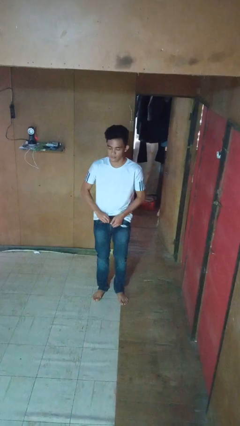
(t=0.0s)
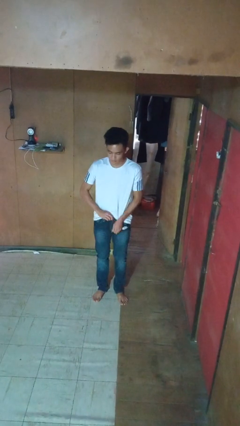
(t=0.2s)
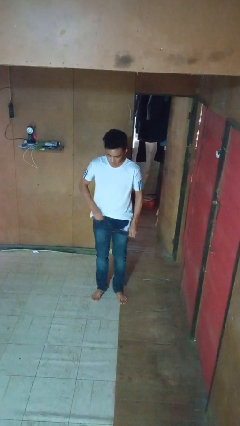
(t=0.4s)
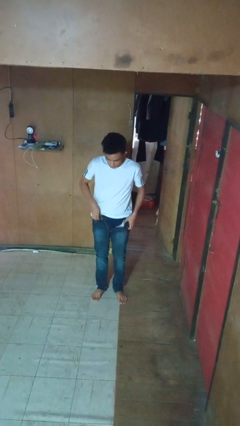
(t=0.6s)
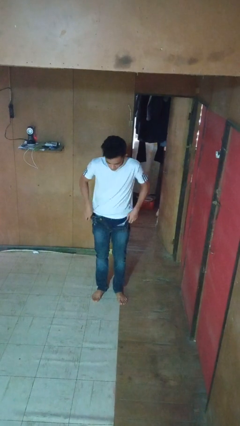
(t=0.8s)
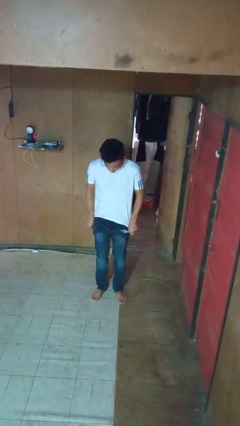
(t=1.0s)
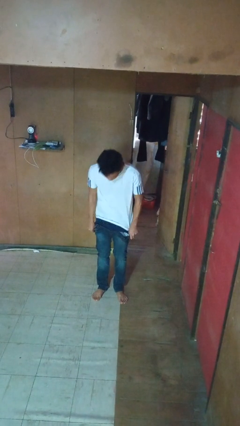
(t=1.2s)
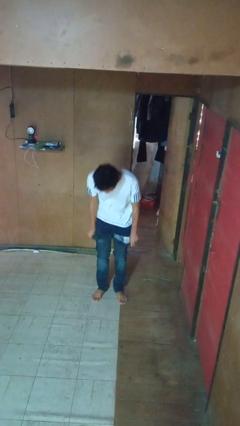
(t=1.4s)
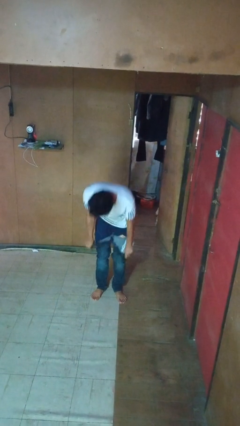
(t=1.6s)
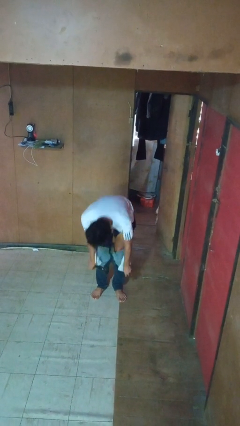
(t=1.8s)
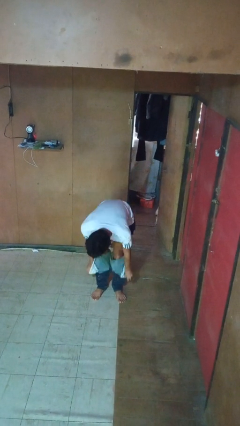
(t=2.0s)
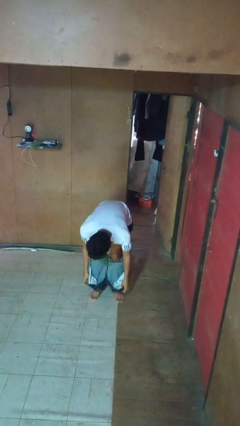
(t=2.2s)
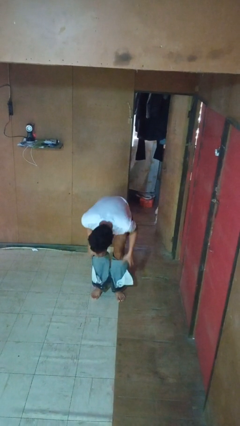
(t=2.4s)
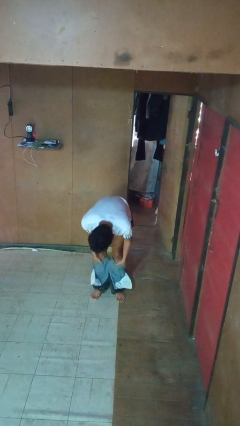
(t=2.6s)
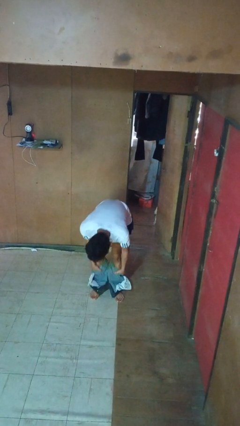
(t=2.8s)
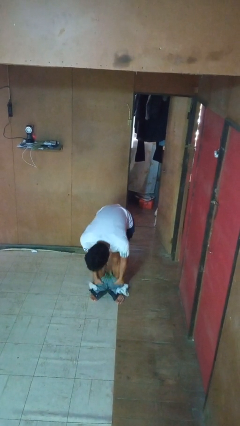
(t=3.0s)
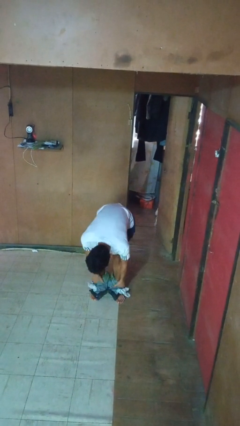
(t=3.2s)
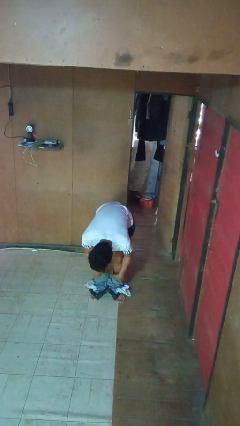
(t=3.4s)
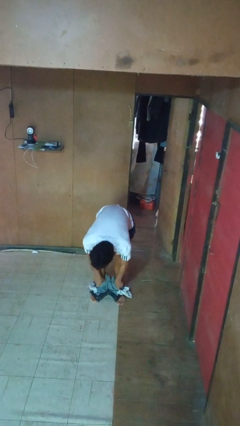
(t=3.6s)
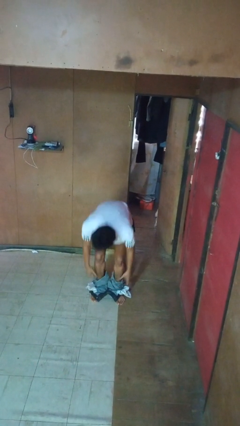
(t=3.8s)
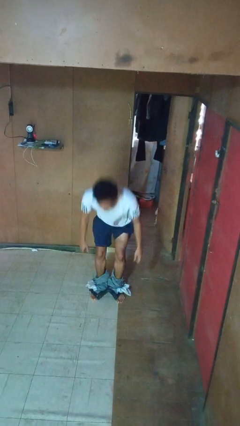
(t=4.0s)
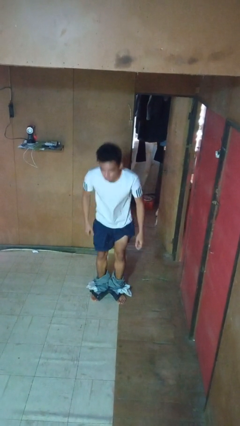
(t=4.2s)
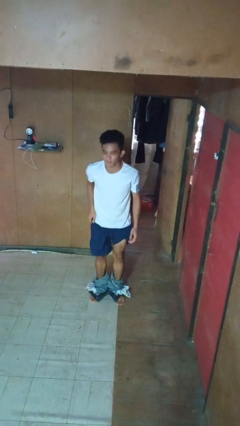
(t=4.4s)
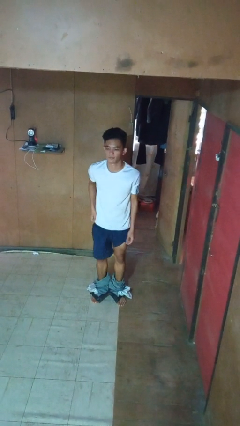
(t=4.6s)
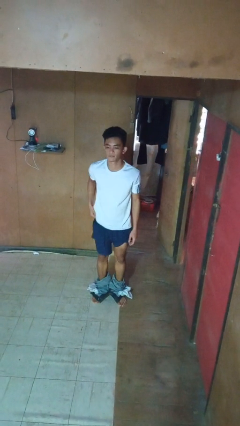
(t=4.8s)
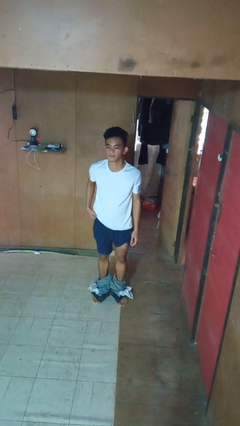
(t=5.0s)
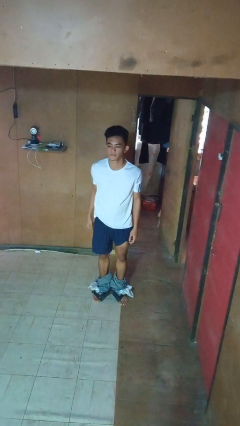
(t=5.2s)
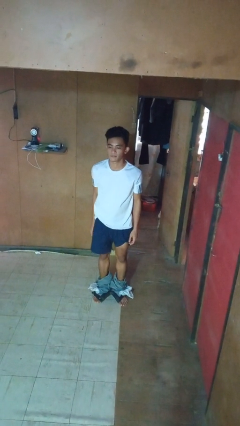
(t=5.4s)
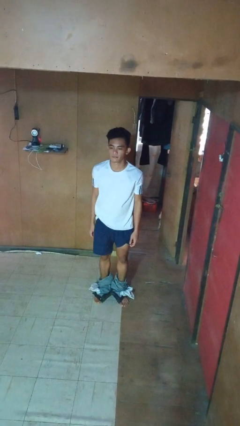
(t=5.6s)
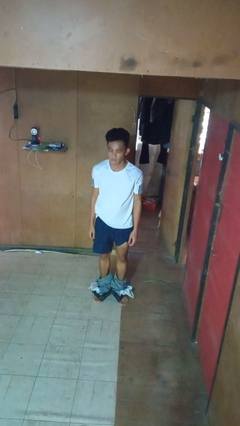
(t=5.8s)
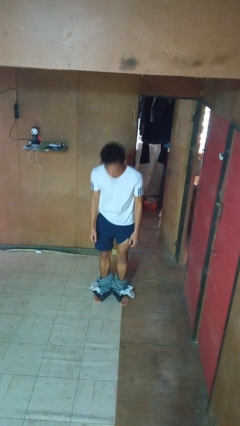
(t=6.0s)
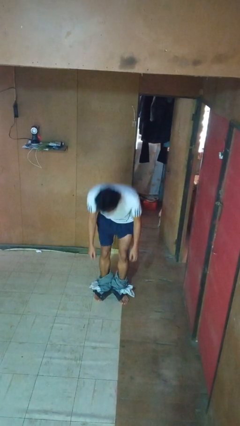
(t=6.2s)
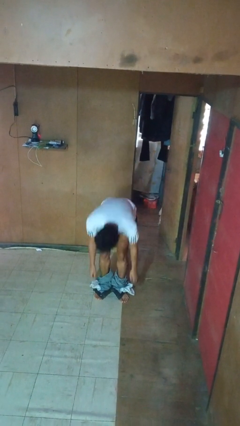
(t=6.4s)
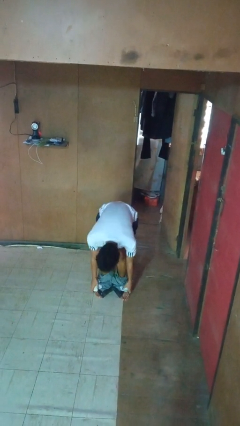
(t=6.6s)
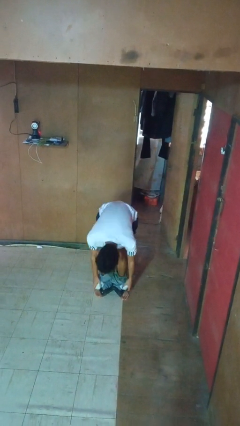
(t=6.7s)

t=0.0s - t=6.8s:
person takes off pants

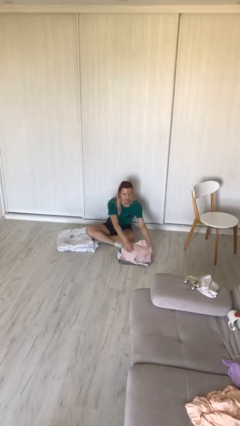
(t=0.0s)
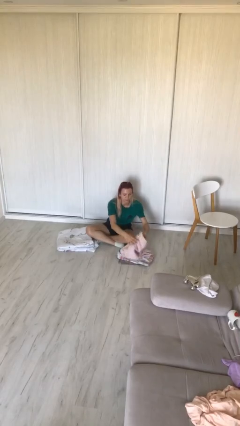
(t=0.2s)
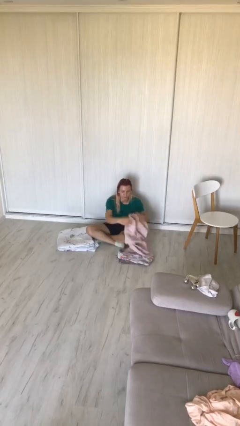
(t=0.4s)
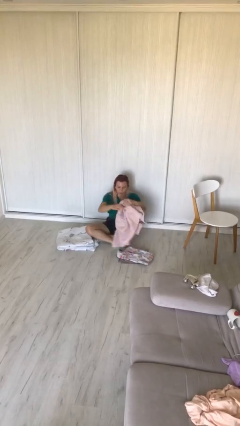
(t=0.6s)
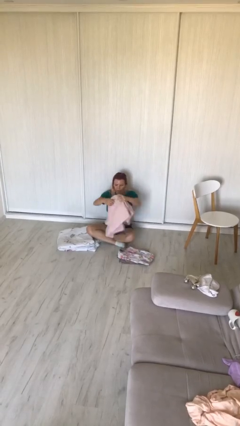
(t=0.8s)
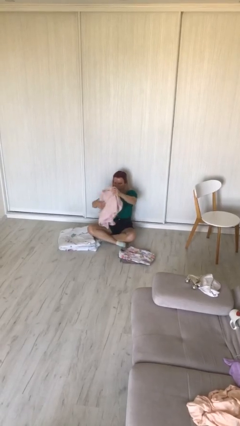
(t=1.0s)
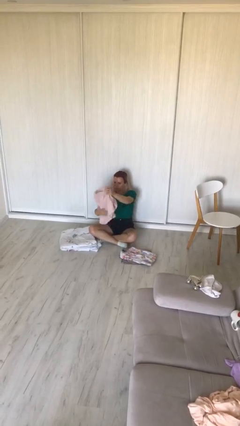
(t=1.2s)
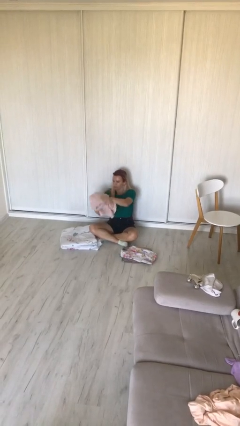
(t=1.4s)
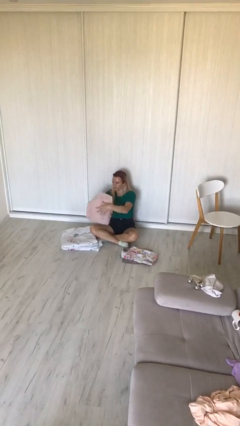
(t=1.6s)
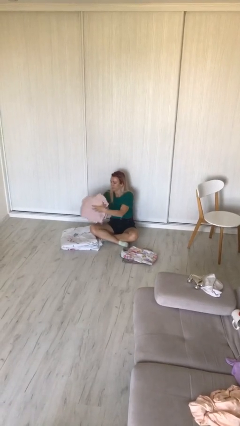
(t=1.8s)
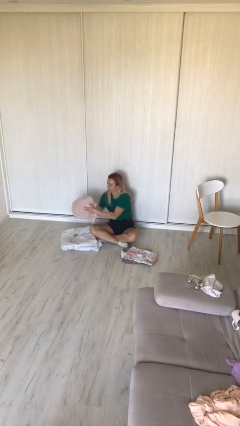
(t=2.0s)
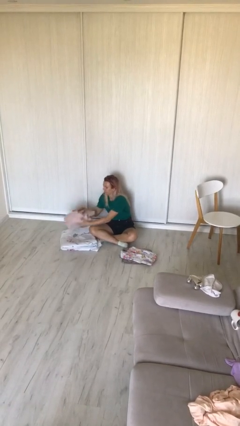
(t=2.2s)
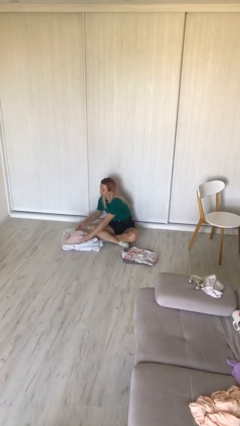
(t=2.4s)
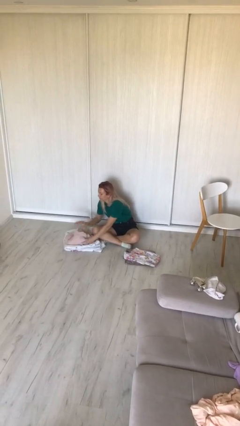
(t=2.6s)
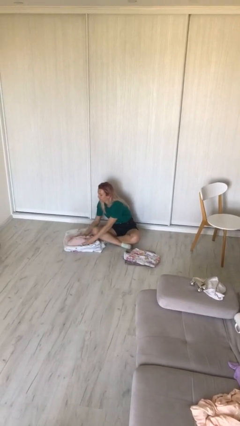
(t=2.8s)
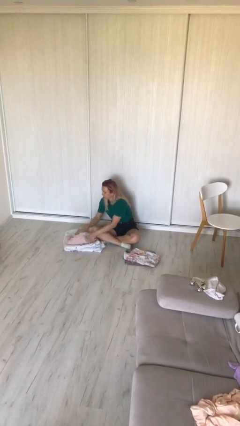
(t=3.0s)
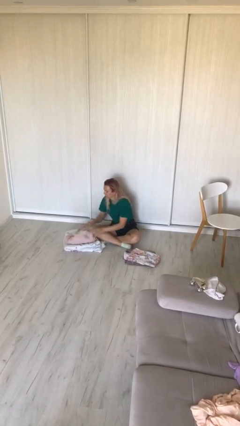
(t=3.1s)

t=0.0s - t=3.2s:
person folds towel

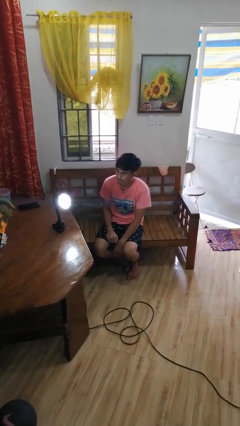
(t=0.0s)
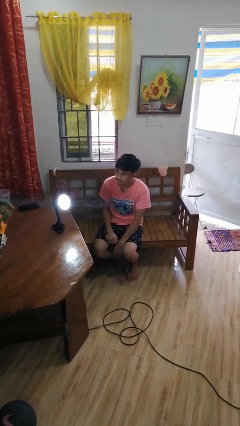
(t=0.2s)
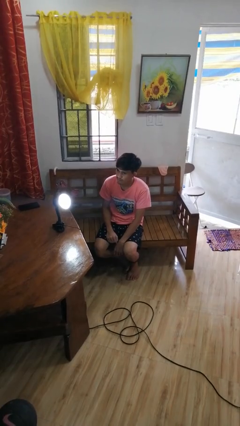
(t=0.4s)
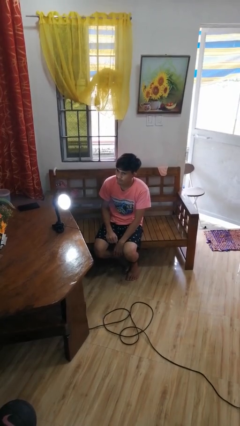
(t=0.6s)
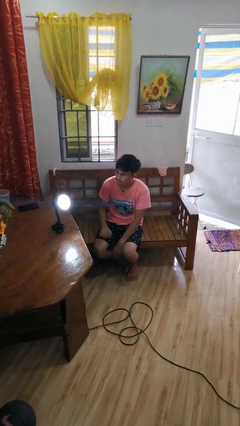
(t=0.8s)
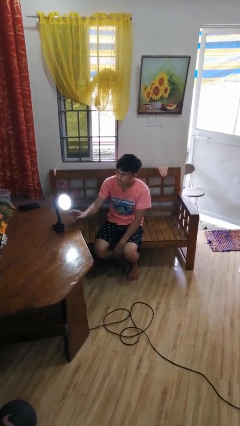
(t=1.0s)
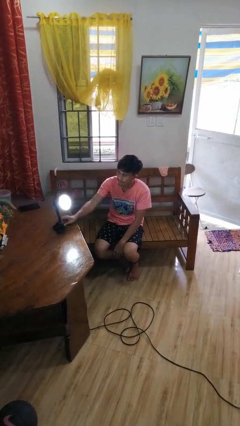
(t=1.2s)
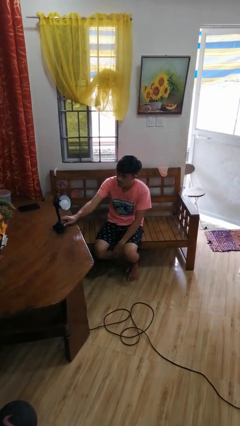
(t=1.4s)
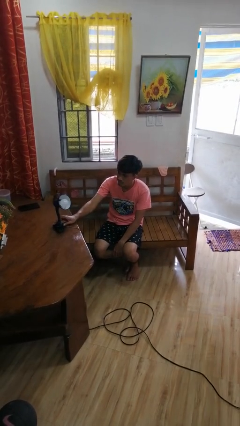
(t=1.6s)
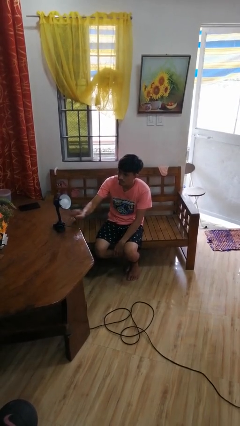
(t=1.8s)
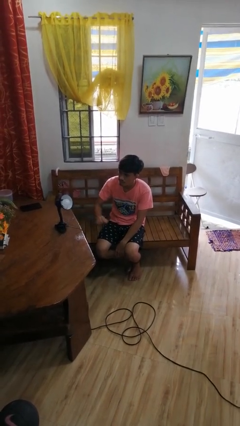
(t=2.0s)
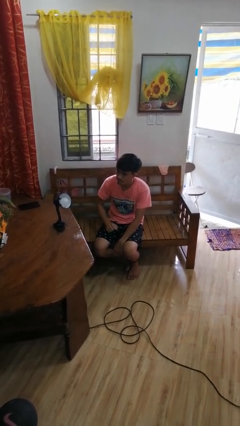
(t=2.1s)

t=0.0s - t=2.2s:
person turns off lamp

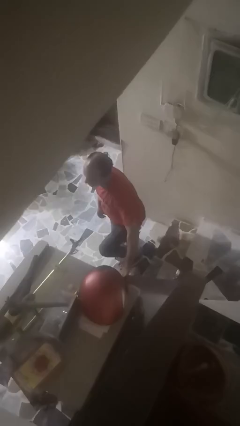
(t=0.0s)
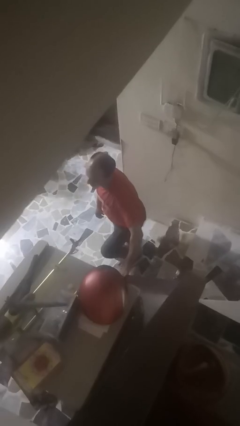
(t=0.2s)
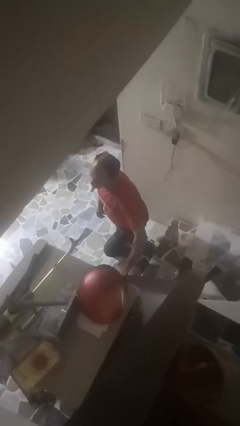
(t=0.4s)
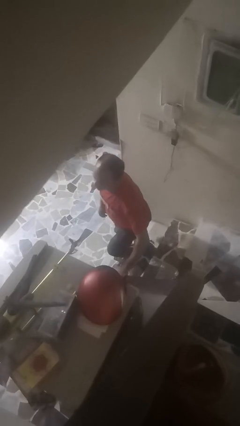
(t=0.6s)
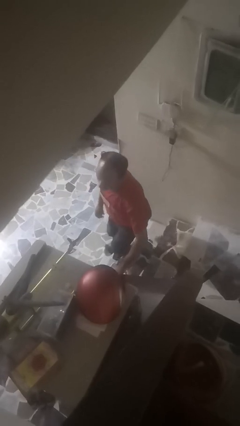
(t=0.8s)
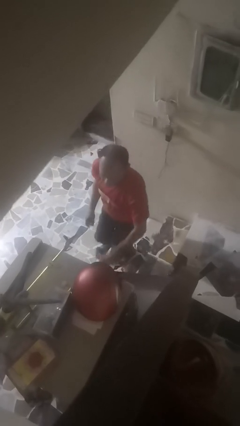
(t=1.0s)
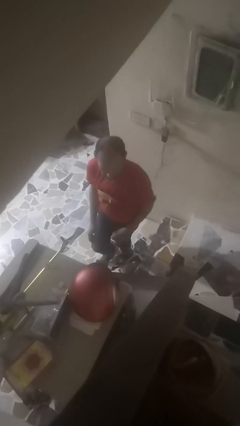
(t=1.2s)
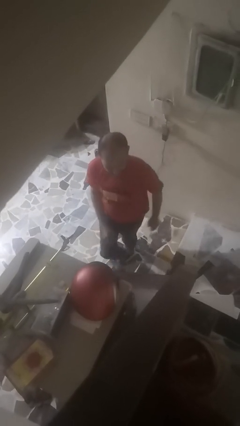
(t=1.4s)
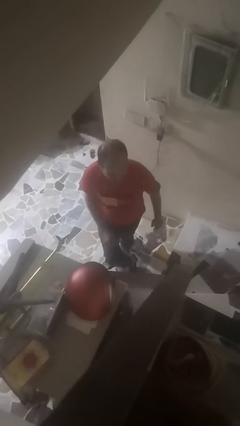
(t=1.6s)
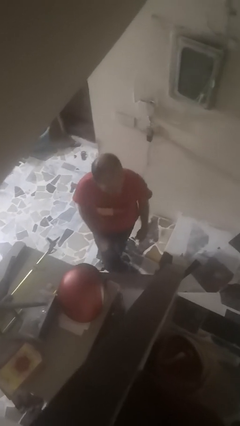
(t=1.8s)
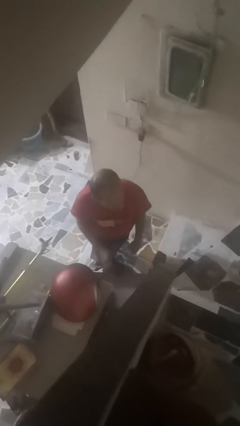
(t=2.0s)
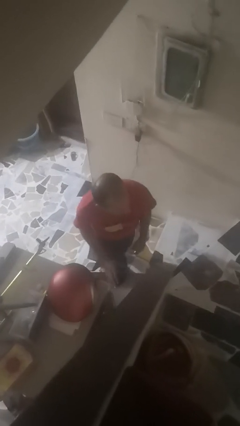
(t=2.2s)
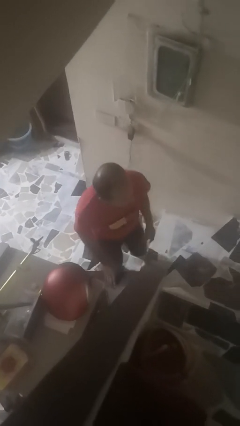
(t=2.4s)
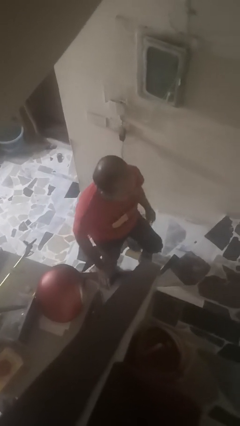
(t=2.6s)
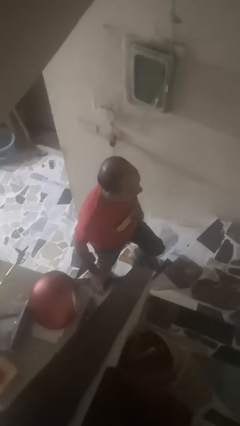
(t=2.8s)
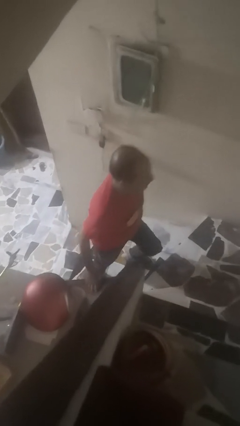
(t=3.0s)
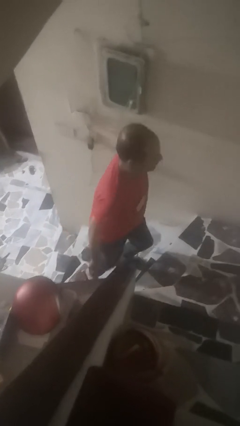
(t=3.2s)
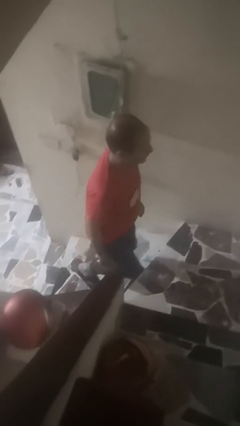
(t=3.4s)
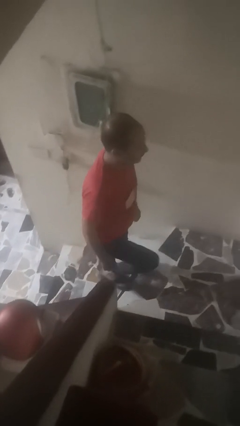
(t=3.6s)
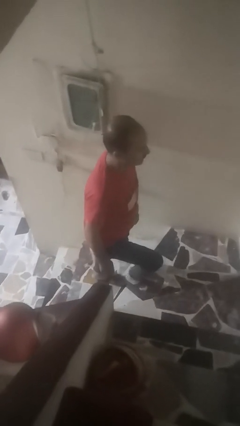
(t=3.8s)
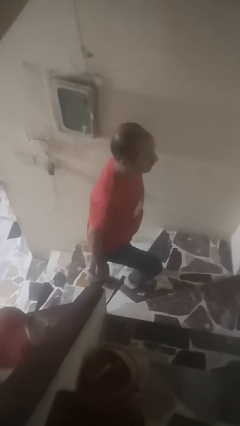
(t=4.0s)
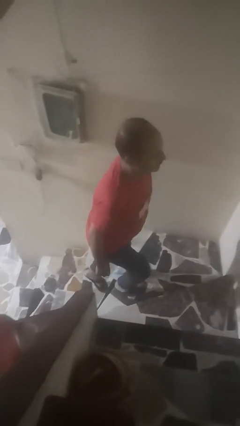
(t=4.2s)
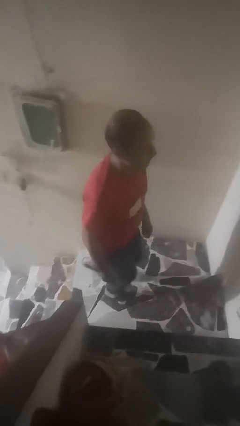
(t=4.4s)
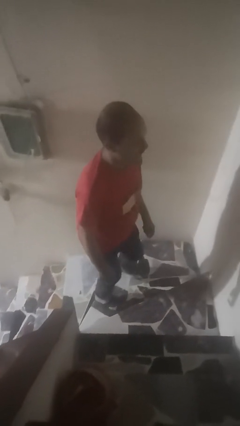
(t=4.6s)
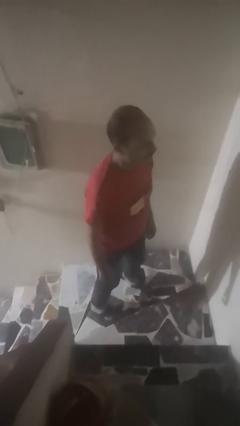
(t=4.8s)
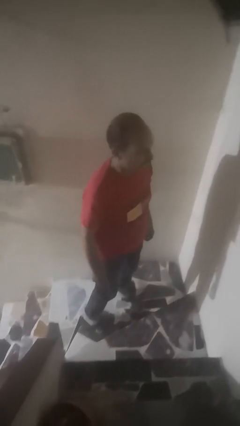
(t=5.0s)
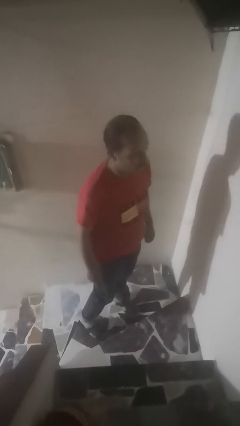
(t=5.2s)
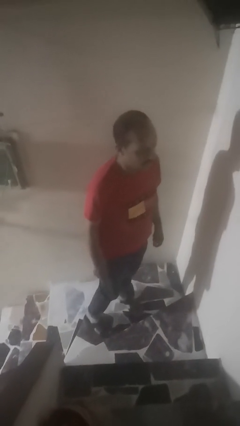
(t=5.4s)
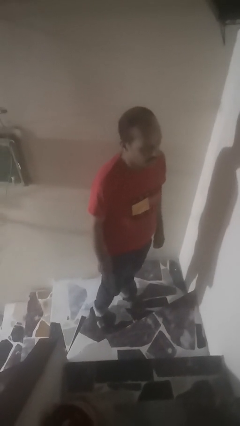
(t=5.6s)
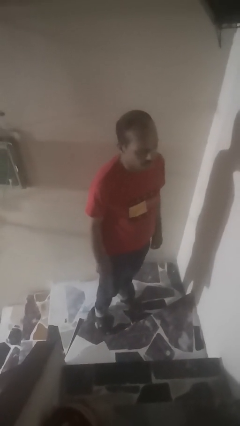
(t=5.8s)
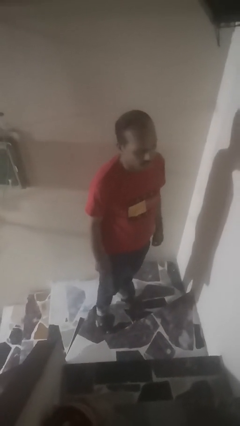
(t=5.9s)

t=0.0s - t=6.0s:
person climbs up stairs
